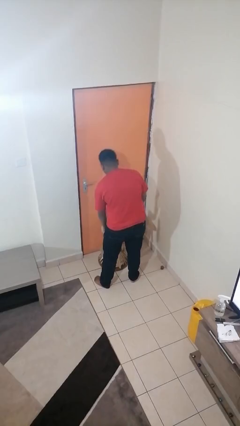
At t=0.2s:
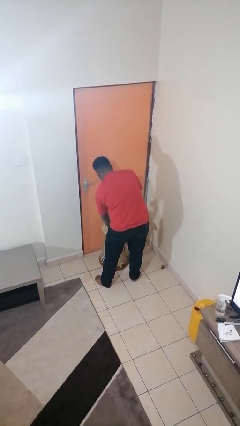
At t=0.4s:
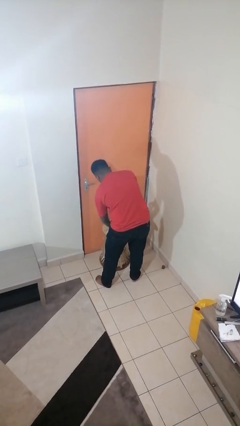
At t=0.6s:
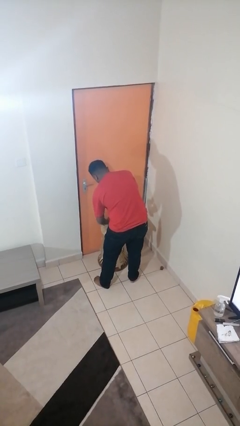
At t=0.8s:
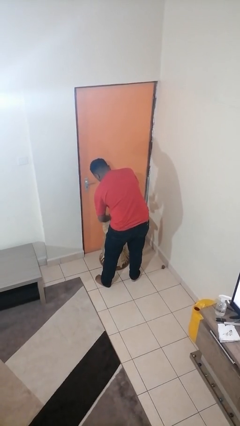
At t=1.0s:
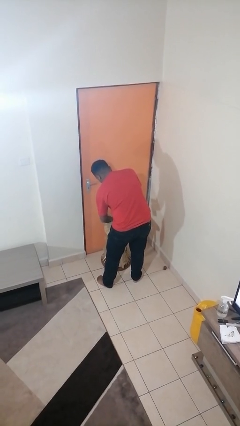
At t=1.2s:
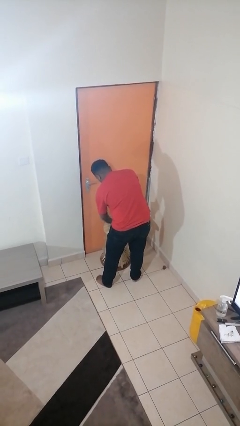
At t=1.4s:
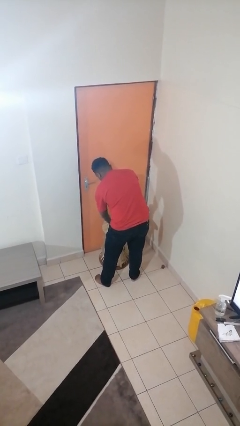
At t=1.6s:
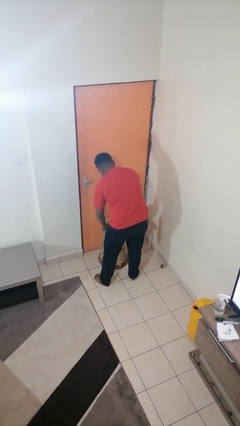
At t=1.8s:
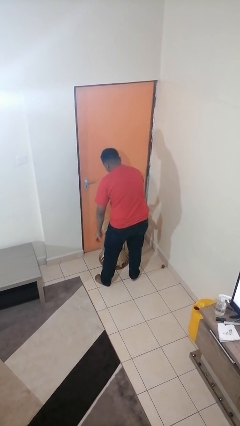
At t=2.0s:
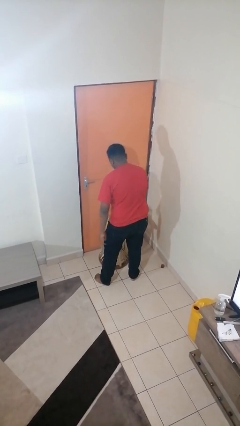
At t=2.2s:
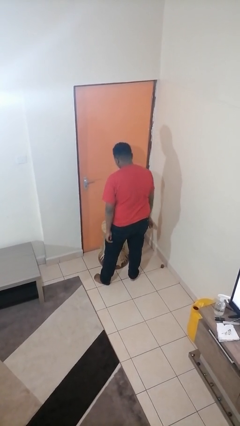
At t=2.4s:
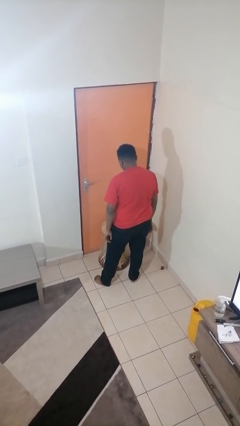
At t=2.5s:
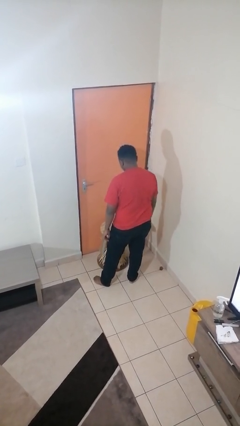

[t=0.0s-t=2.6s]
person closes jar

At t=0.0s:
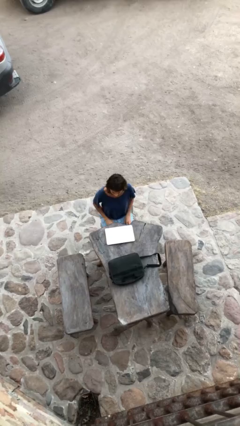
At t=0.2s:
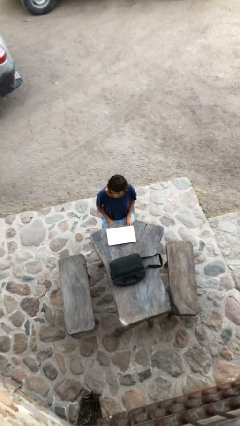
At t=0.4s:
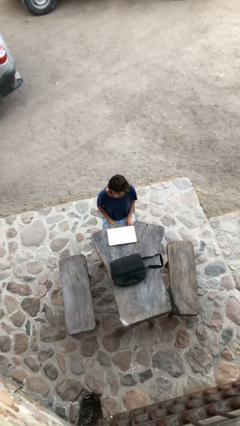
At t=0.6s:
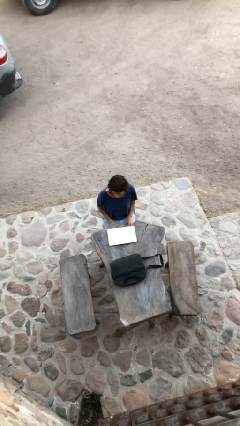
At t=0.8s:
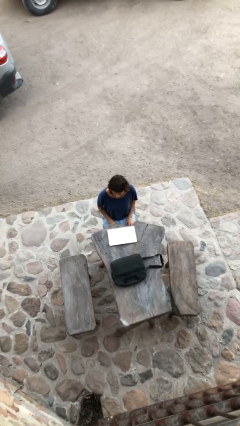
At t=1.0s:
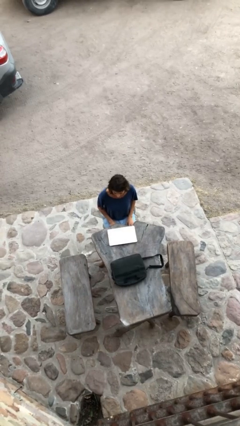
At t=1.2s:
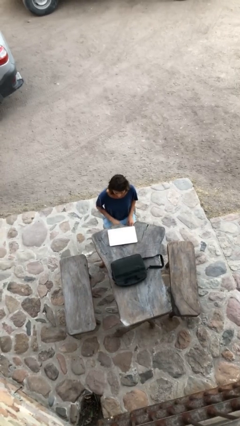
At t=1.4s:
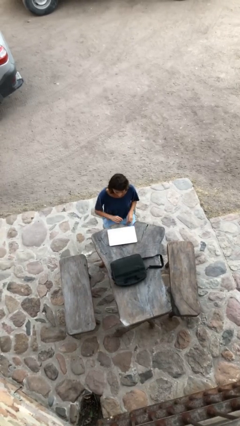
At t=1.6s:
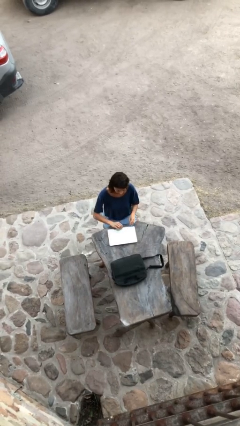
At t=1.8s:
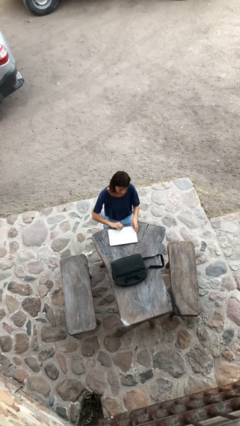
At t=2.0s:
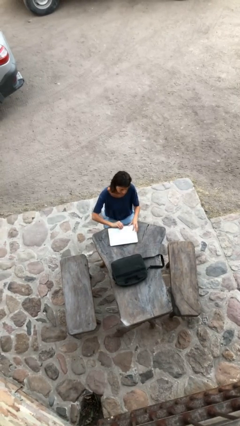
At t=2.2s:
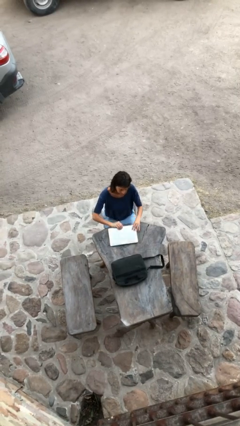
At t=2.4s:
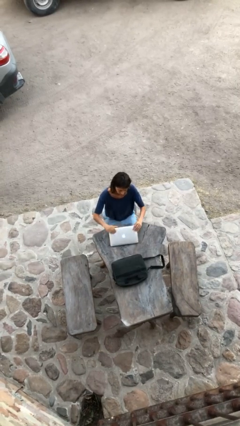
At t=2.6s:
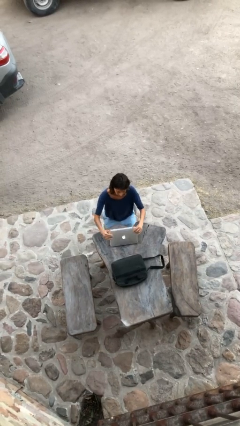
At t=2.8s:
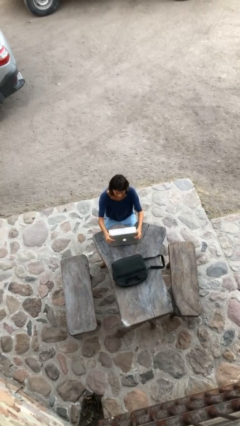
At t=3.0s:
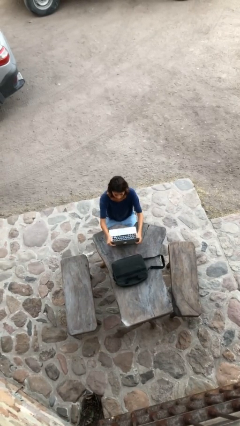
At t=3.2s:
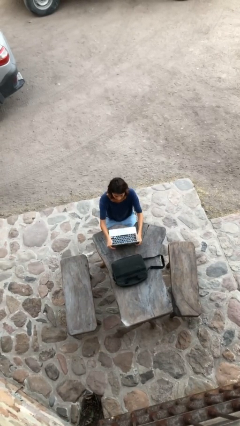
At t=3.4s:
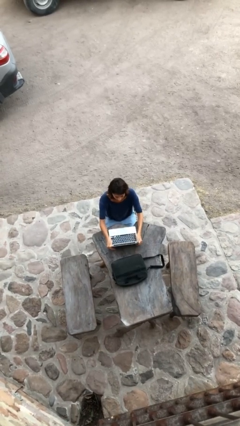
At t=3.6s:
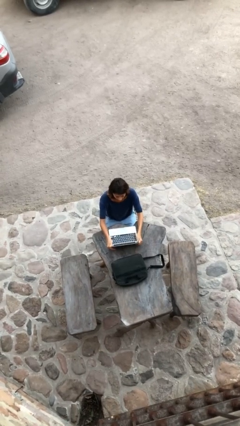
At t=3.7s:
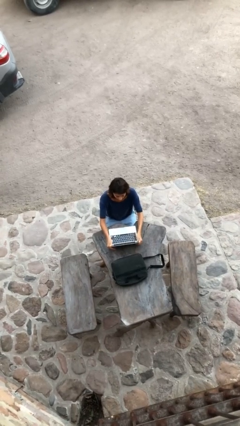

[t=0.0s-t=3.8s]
person interacts with laptop

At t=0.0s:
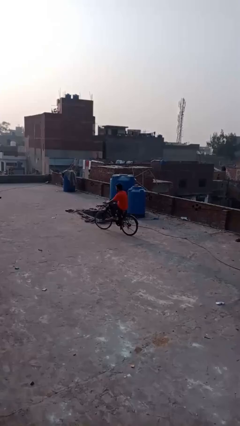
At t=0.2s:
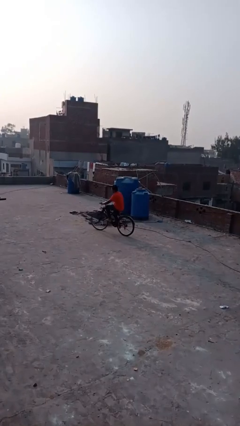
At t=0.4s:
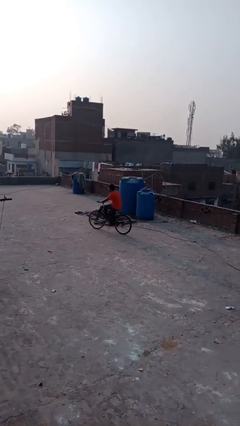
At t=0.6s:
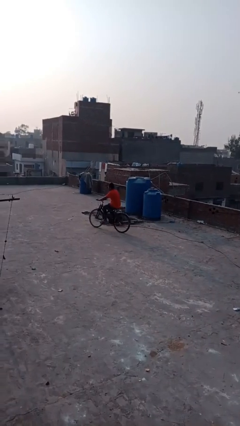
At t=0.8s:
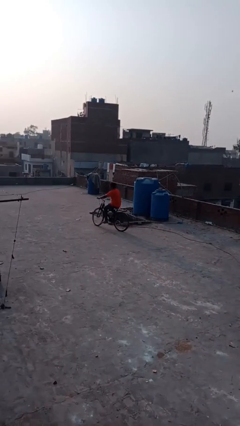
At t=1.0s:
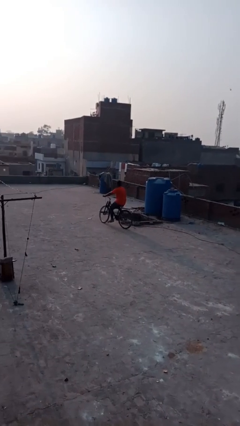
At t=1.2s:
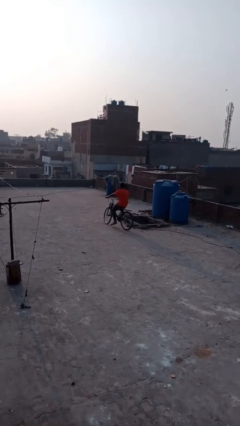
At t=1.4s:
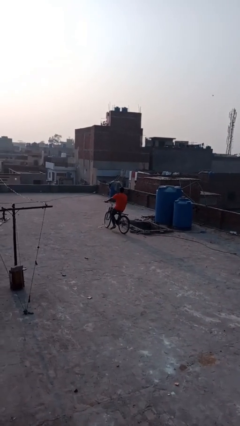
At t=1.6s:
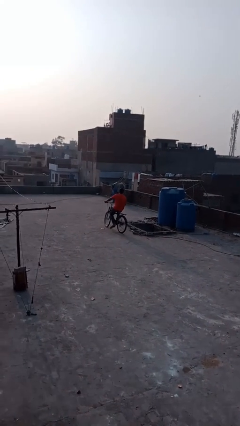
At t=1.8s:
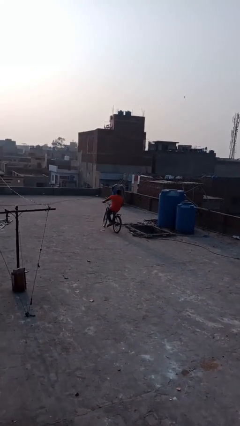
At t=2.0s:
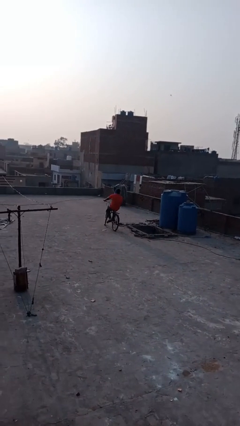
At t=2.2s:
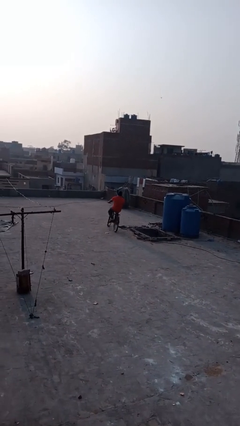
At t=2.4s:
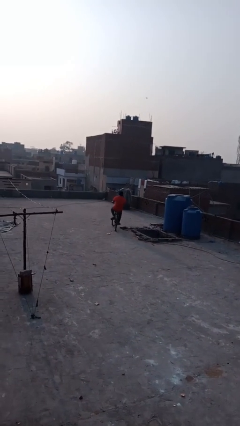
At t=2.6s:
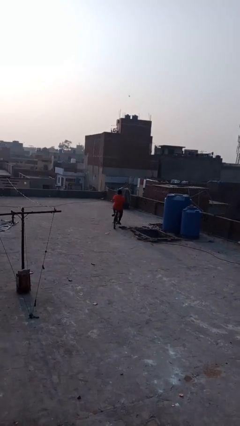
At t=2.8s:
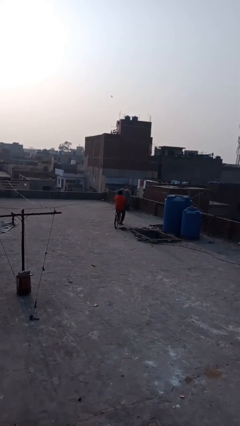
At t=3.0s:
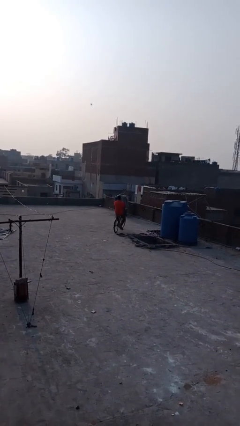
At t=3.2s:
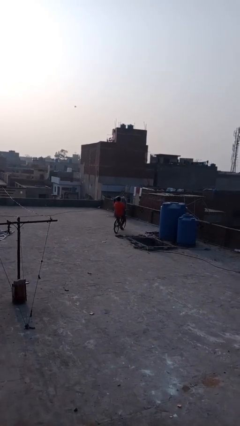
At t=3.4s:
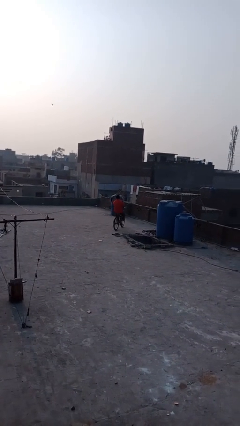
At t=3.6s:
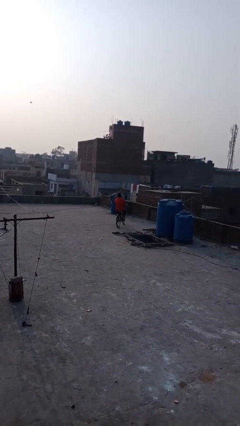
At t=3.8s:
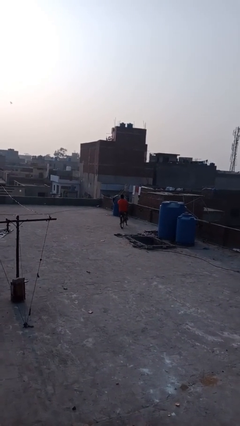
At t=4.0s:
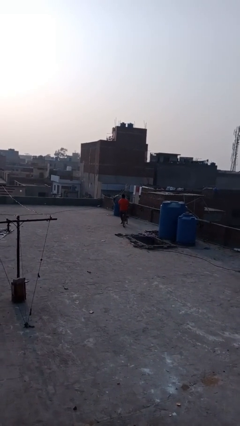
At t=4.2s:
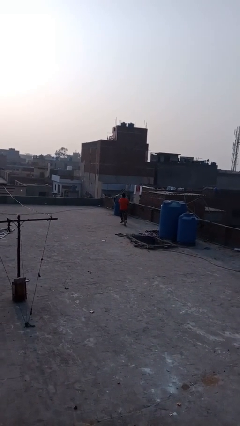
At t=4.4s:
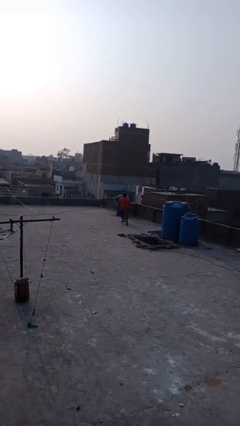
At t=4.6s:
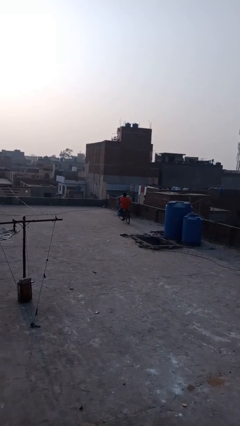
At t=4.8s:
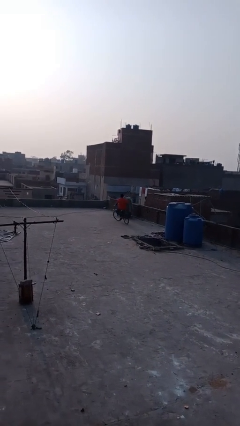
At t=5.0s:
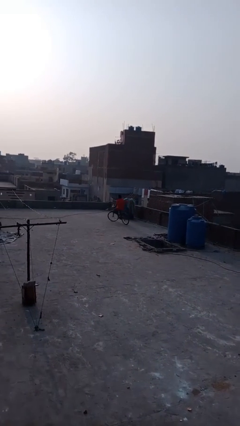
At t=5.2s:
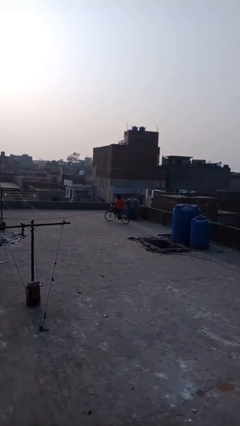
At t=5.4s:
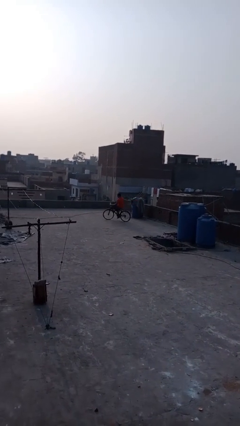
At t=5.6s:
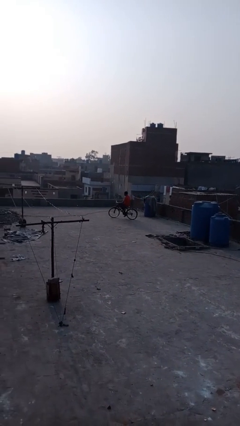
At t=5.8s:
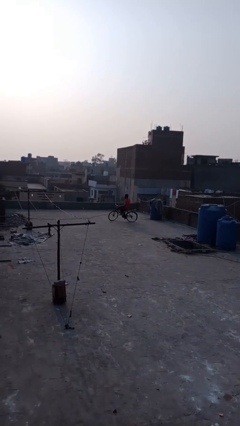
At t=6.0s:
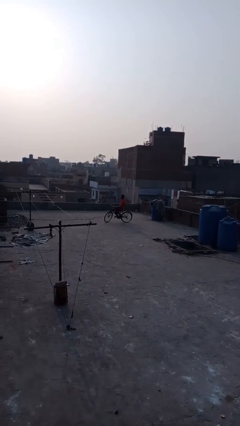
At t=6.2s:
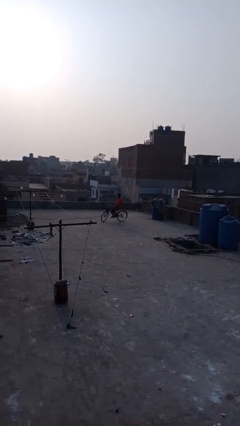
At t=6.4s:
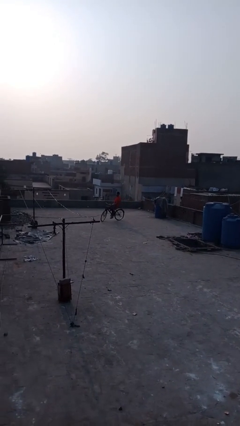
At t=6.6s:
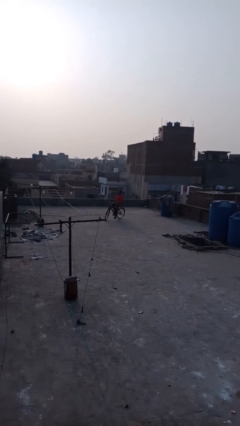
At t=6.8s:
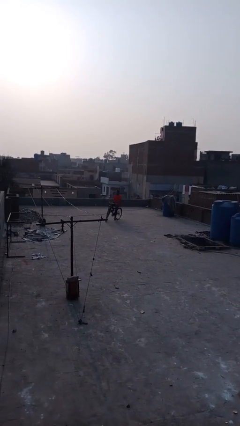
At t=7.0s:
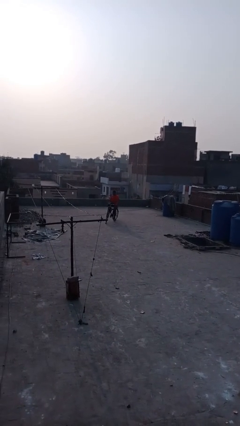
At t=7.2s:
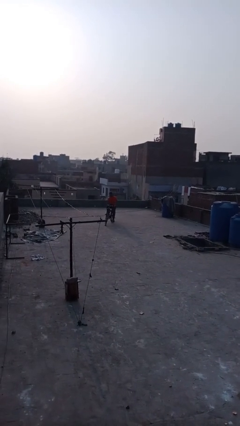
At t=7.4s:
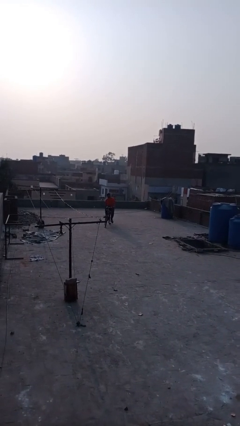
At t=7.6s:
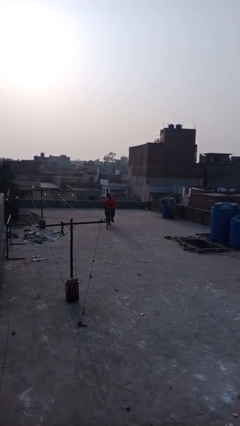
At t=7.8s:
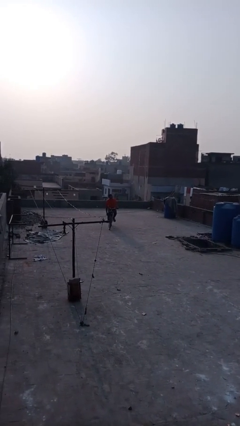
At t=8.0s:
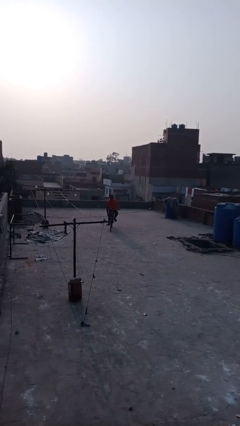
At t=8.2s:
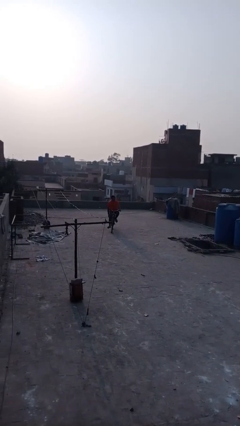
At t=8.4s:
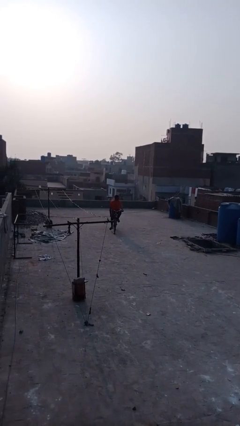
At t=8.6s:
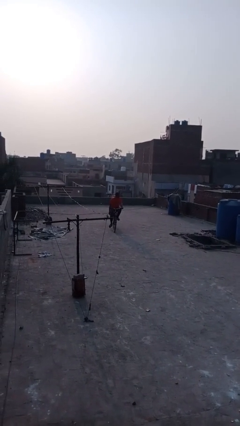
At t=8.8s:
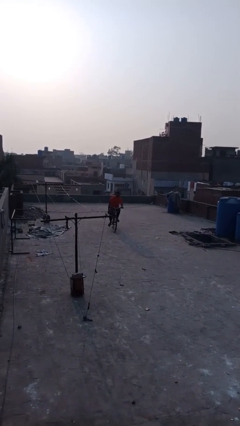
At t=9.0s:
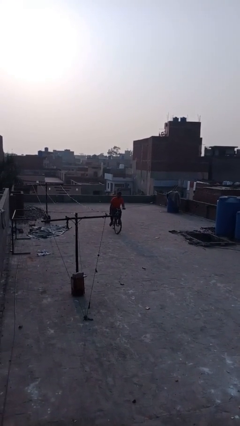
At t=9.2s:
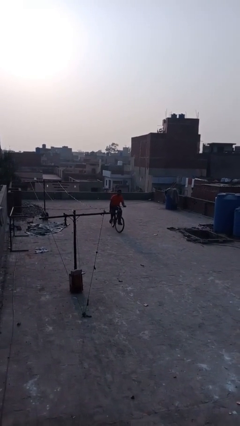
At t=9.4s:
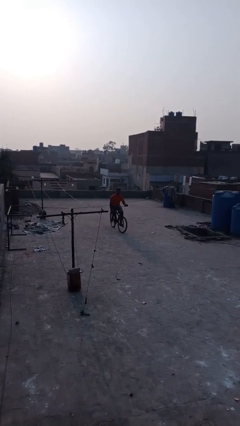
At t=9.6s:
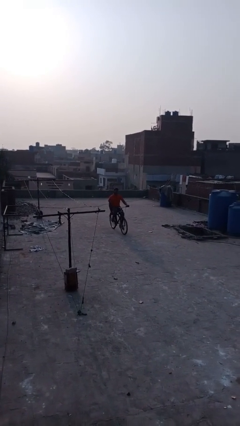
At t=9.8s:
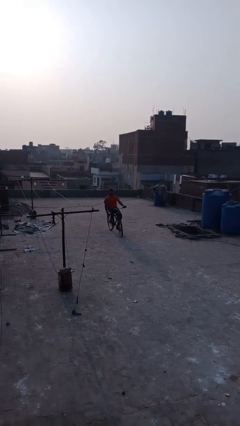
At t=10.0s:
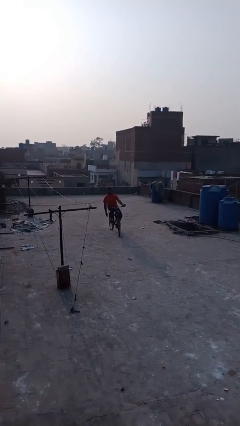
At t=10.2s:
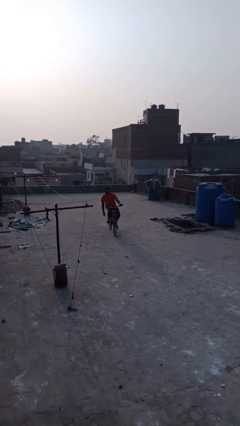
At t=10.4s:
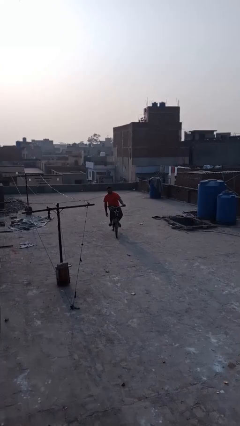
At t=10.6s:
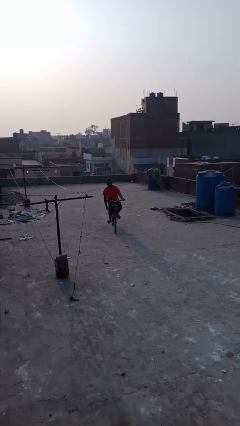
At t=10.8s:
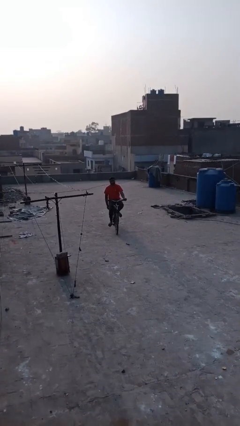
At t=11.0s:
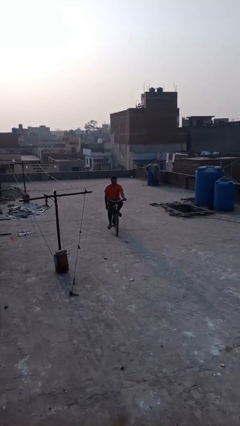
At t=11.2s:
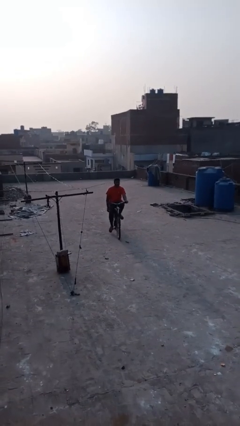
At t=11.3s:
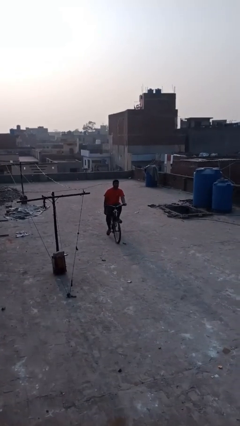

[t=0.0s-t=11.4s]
person rides bicycle
